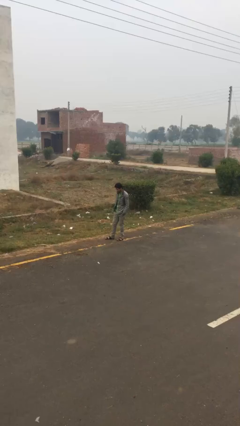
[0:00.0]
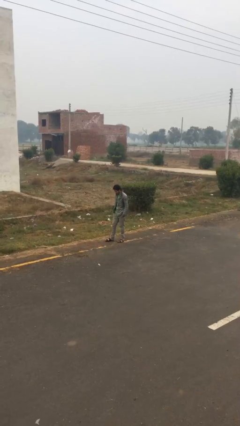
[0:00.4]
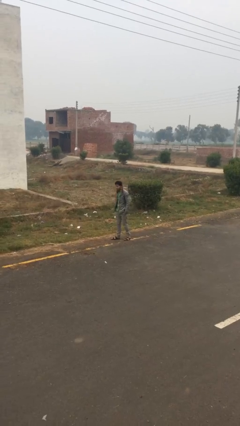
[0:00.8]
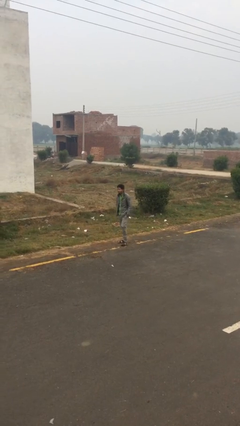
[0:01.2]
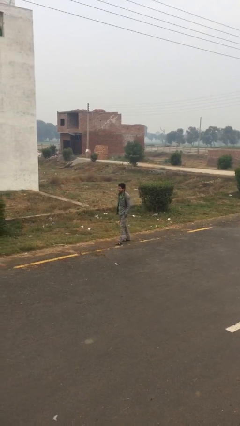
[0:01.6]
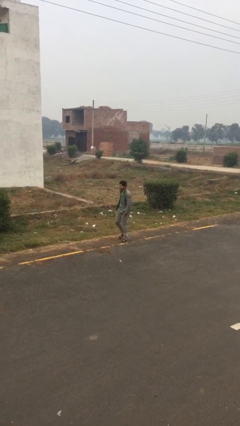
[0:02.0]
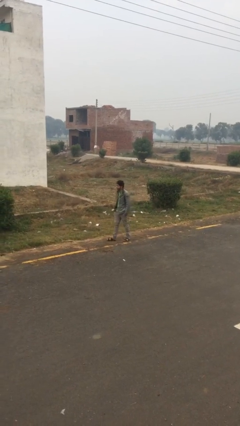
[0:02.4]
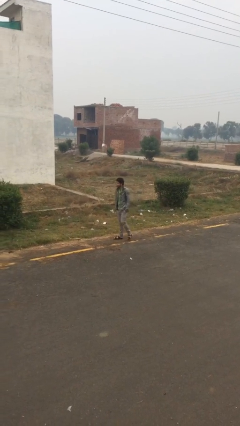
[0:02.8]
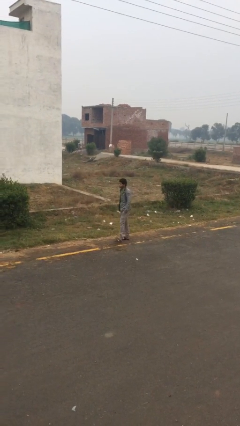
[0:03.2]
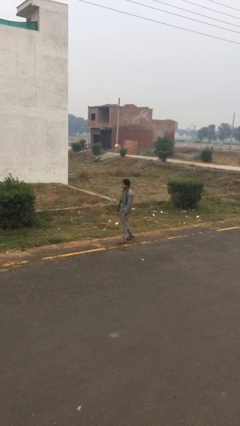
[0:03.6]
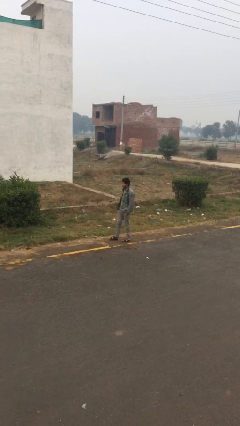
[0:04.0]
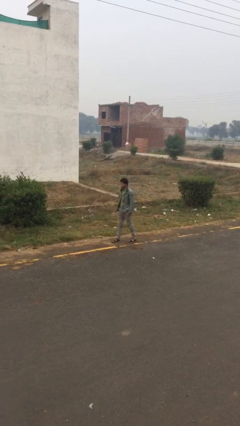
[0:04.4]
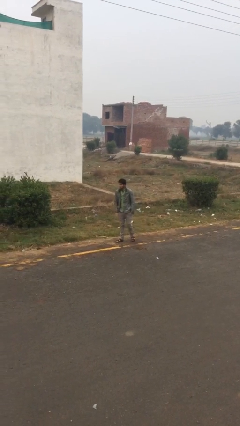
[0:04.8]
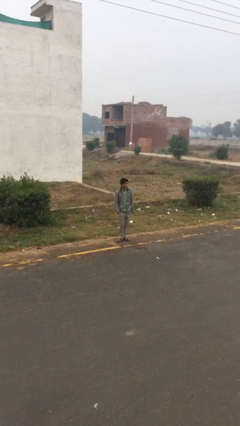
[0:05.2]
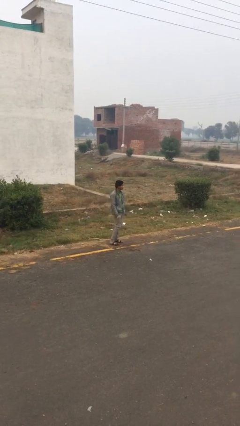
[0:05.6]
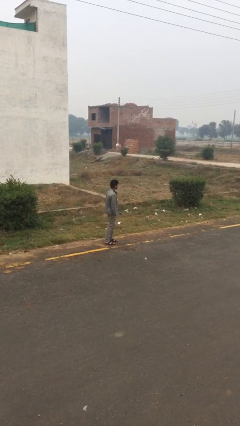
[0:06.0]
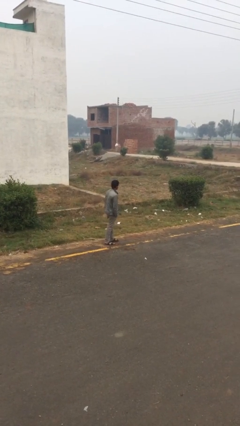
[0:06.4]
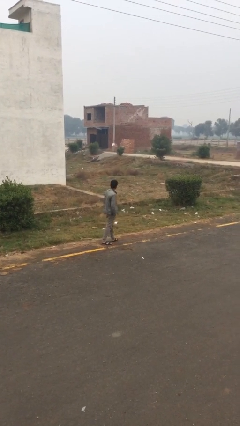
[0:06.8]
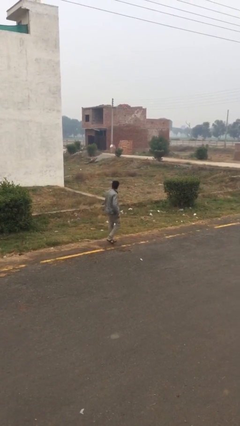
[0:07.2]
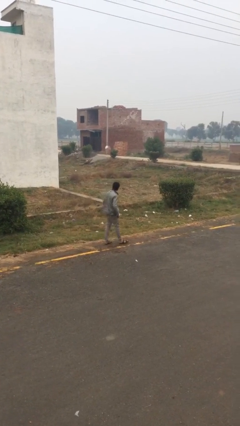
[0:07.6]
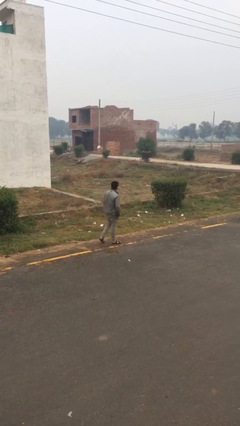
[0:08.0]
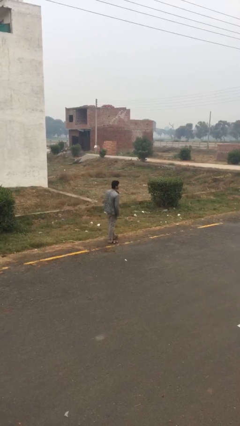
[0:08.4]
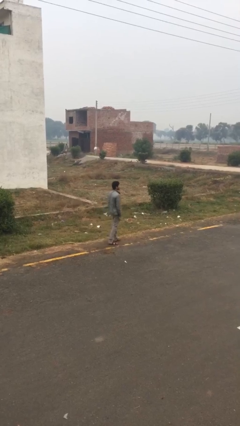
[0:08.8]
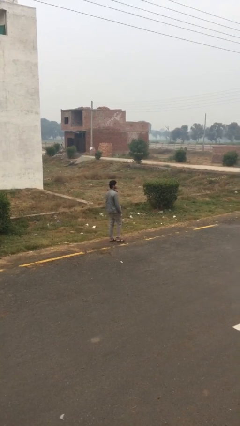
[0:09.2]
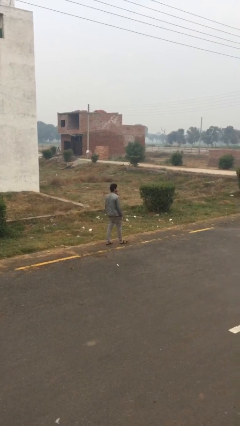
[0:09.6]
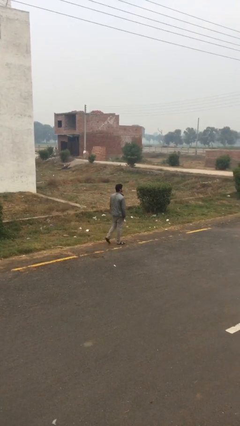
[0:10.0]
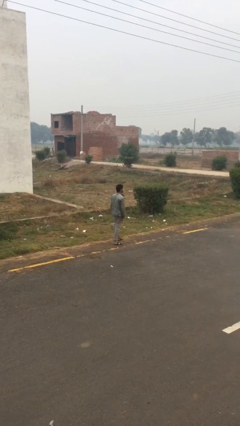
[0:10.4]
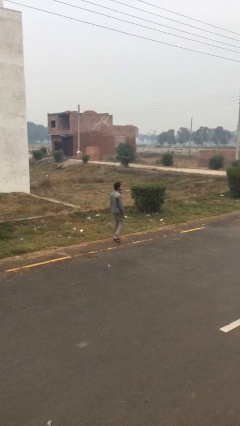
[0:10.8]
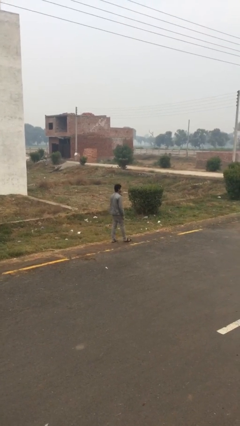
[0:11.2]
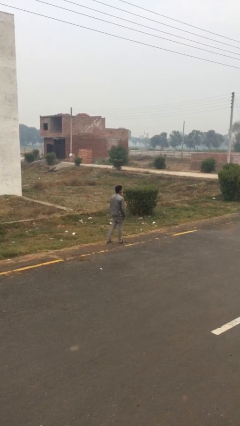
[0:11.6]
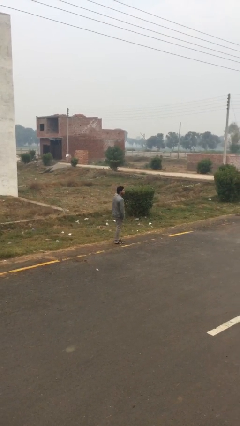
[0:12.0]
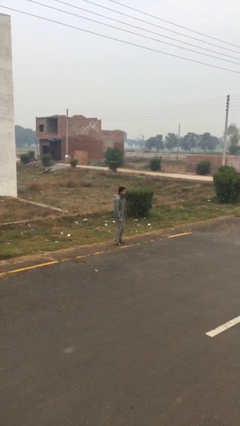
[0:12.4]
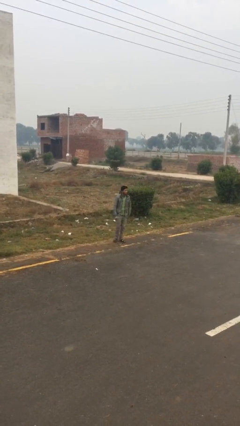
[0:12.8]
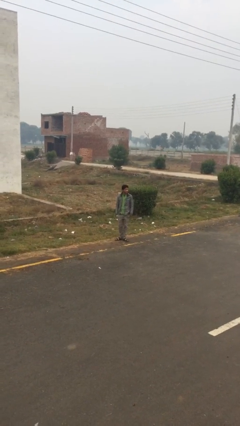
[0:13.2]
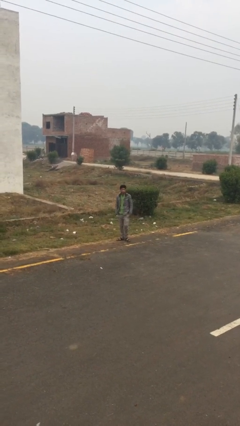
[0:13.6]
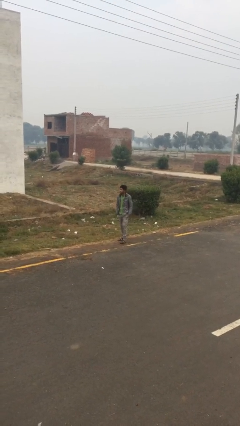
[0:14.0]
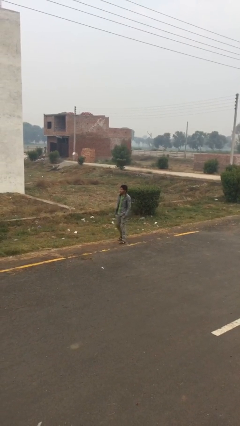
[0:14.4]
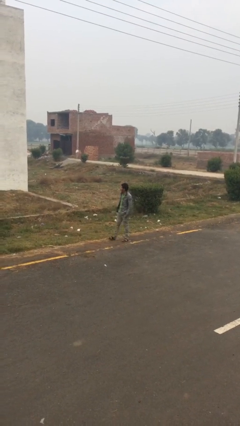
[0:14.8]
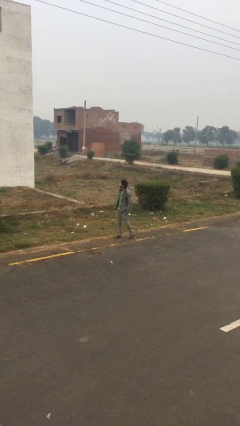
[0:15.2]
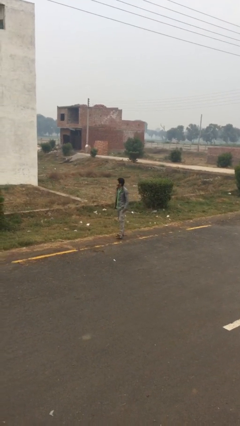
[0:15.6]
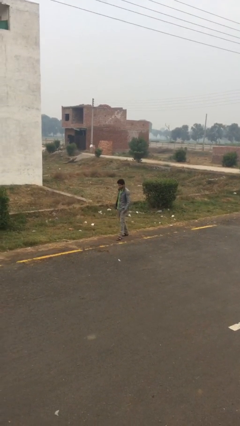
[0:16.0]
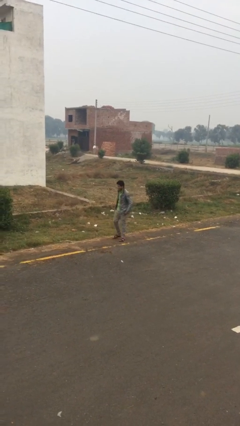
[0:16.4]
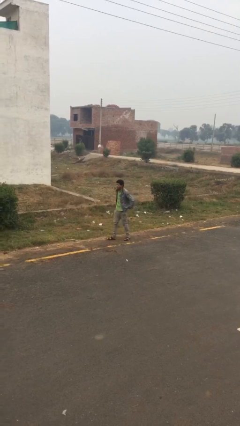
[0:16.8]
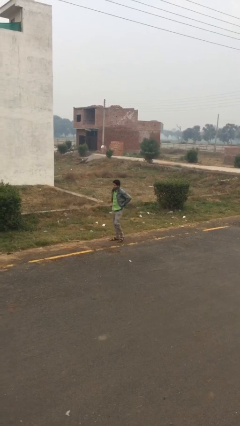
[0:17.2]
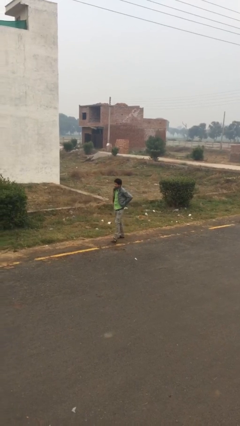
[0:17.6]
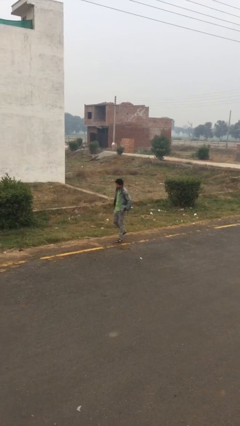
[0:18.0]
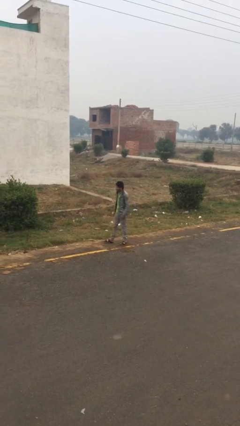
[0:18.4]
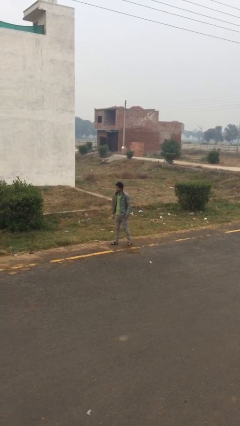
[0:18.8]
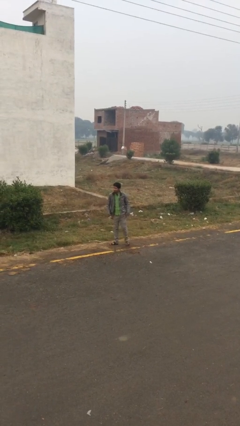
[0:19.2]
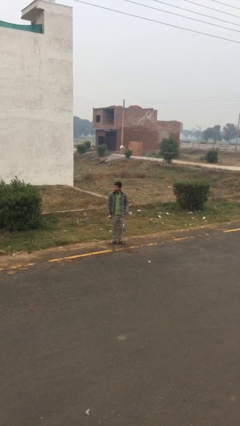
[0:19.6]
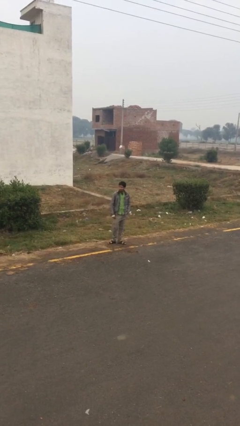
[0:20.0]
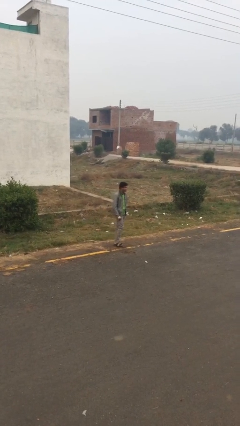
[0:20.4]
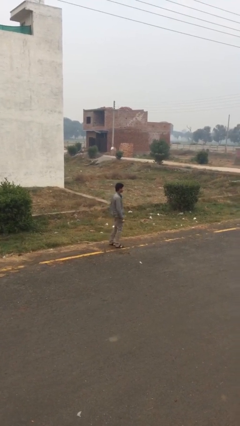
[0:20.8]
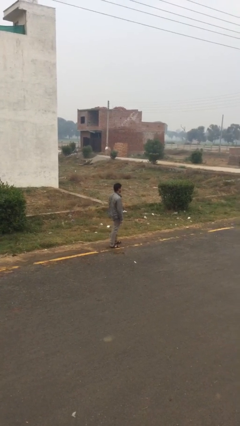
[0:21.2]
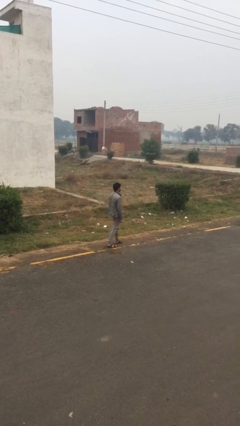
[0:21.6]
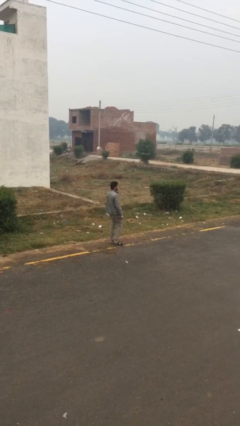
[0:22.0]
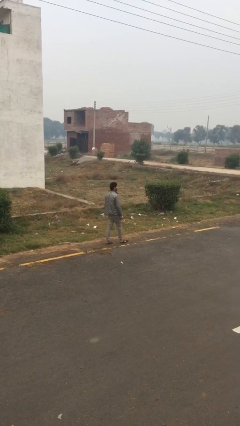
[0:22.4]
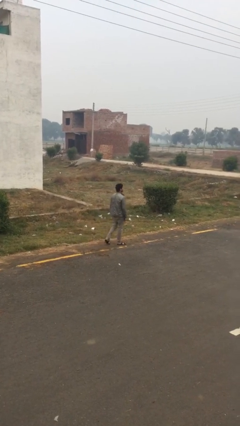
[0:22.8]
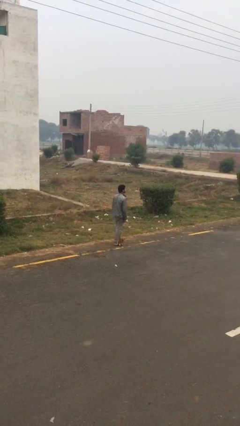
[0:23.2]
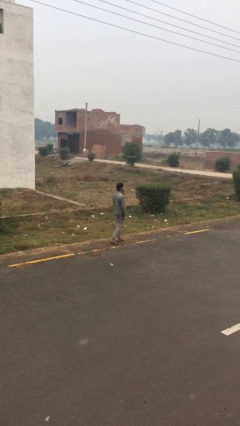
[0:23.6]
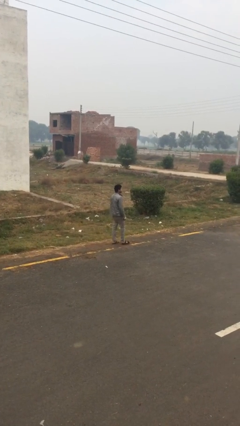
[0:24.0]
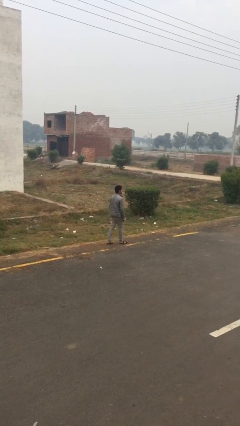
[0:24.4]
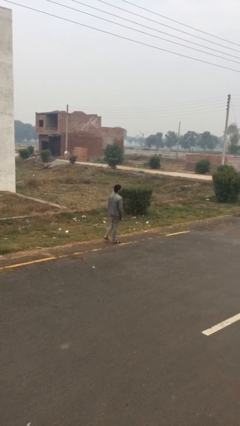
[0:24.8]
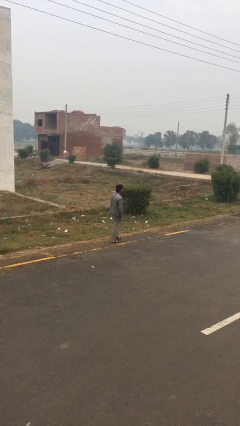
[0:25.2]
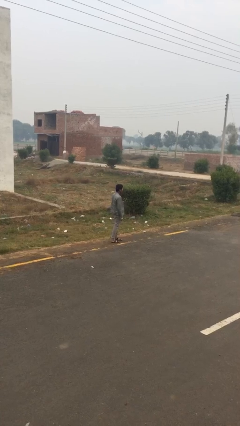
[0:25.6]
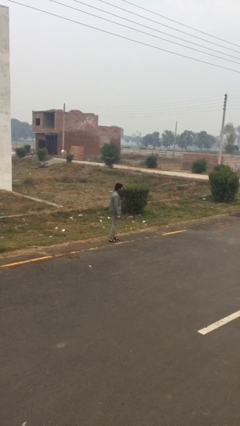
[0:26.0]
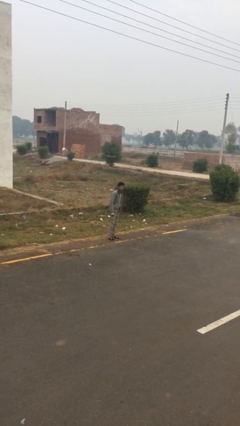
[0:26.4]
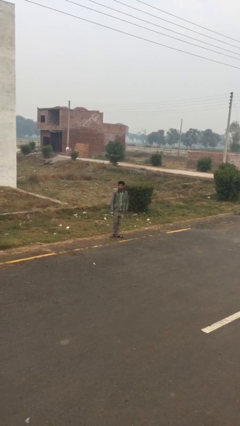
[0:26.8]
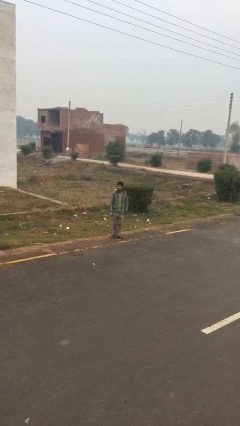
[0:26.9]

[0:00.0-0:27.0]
person walks

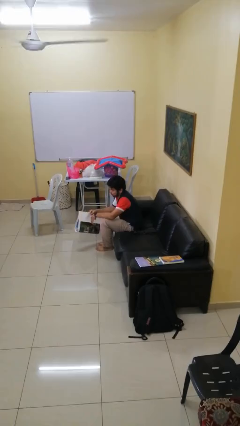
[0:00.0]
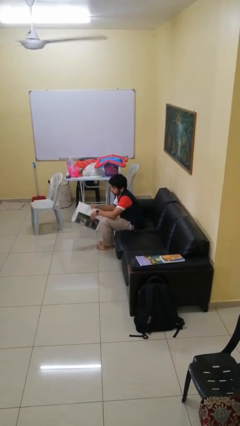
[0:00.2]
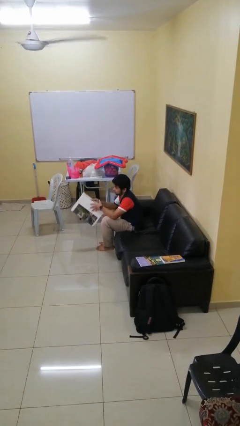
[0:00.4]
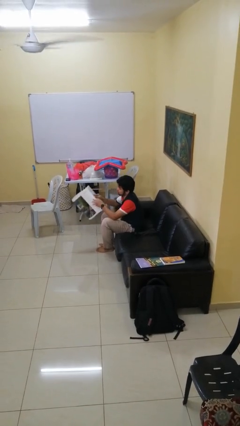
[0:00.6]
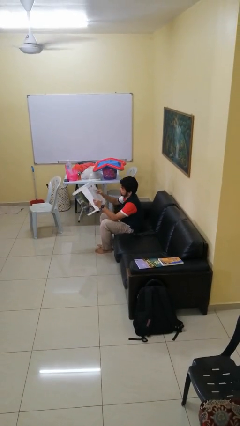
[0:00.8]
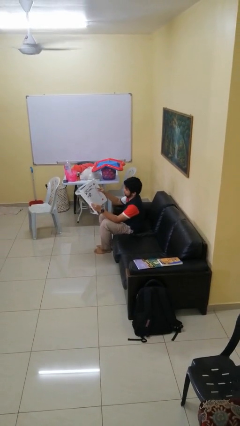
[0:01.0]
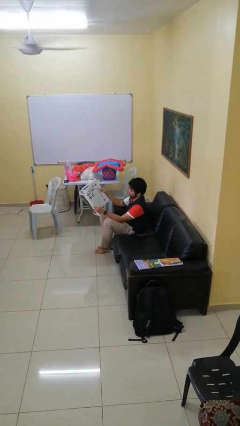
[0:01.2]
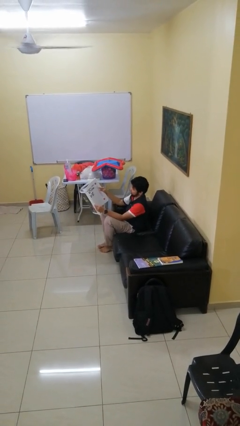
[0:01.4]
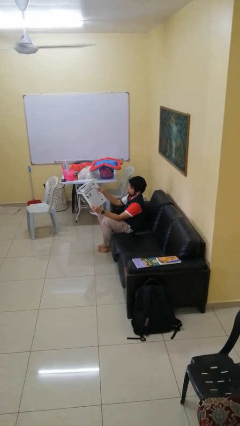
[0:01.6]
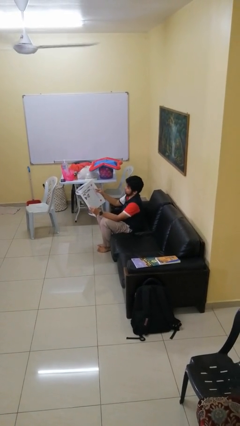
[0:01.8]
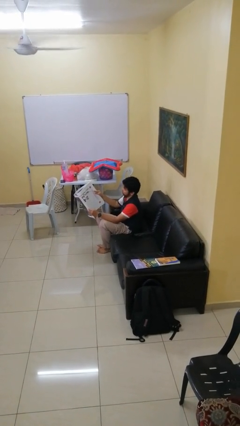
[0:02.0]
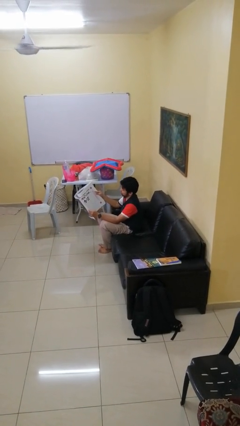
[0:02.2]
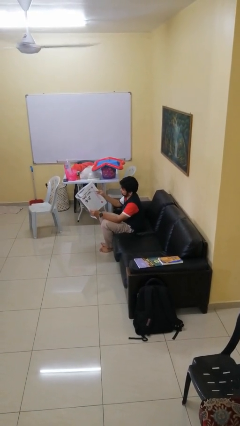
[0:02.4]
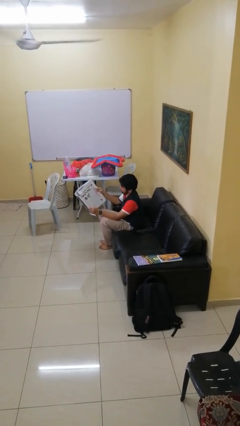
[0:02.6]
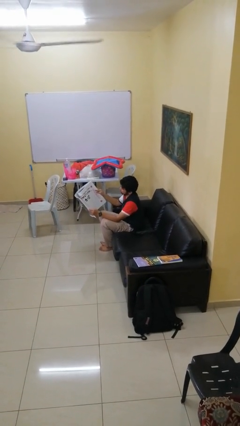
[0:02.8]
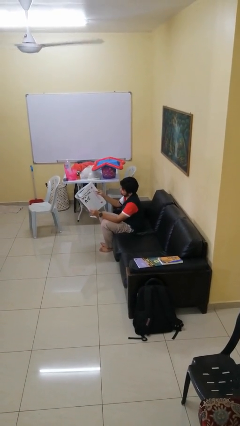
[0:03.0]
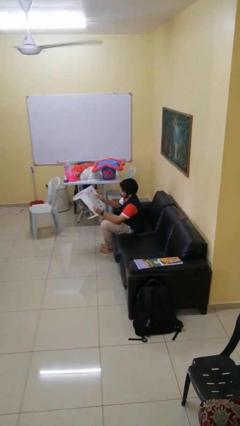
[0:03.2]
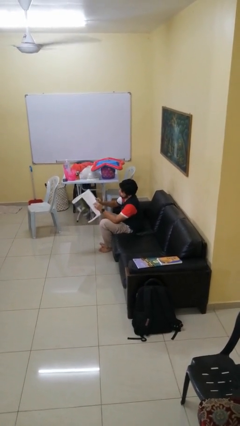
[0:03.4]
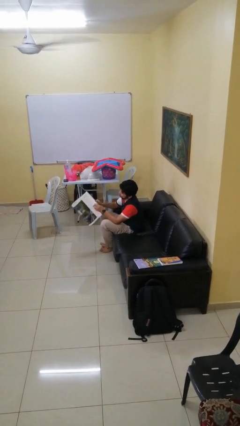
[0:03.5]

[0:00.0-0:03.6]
person reads newspaper

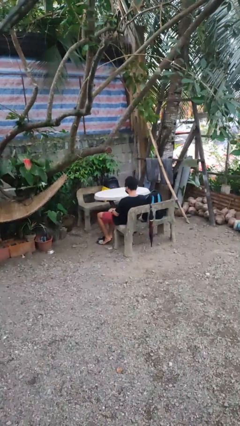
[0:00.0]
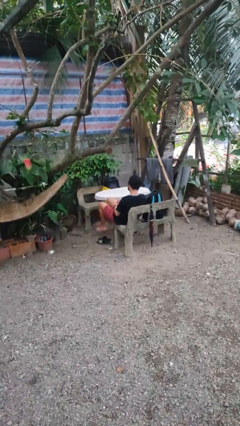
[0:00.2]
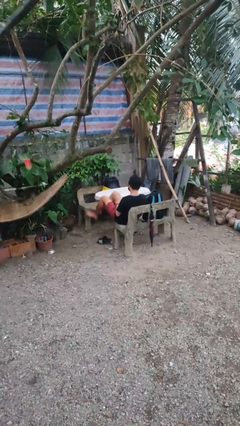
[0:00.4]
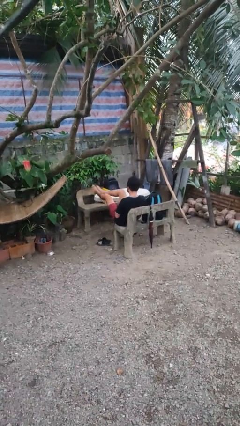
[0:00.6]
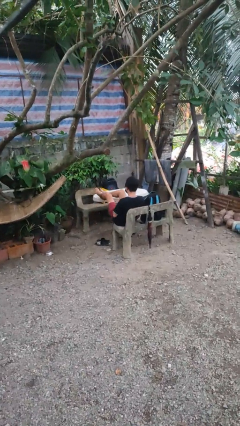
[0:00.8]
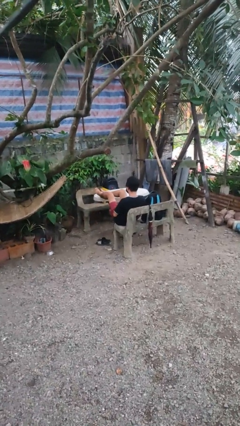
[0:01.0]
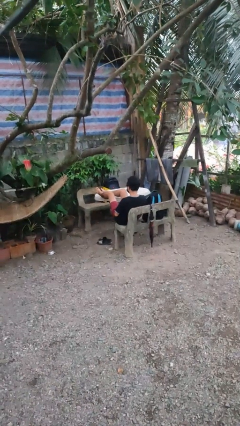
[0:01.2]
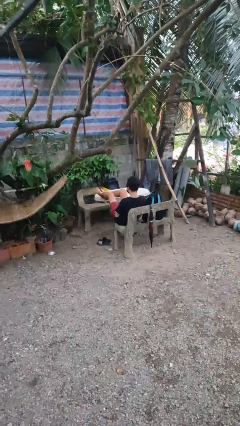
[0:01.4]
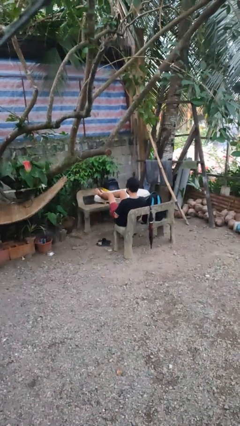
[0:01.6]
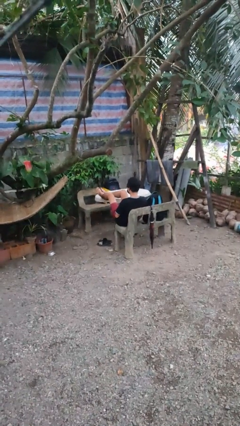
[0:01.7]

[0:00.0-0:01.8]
person puts feet up
